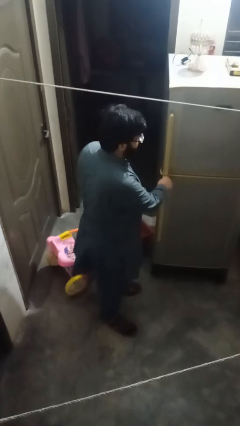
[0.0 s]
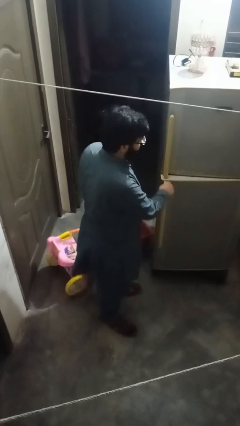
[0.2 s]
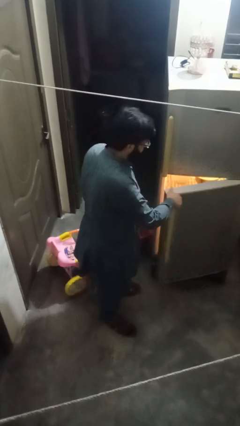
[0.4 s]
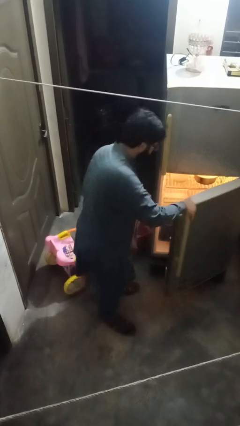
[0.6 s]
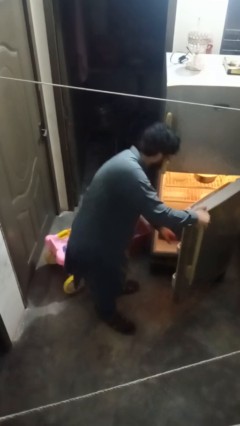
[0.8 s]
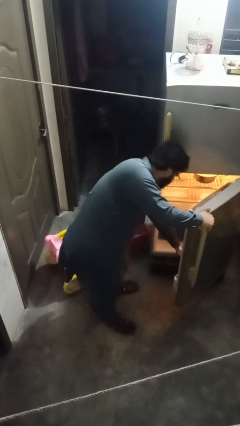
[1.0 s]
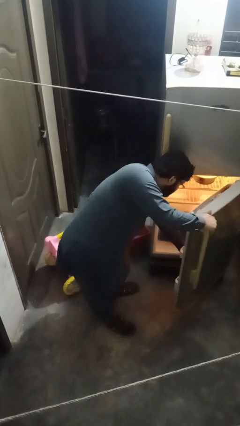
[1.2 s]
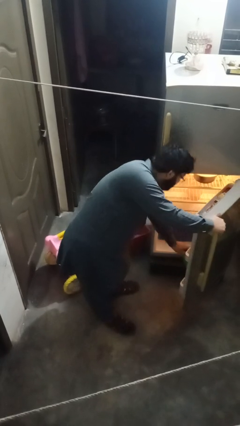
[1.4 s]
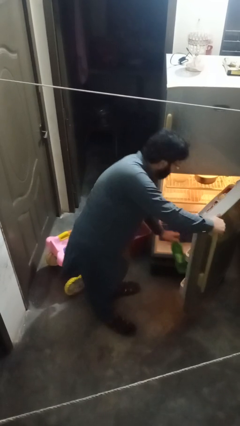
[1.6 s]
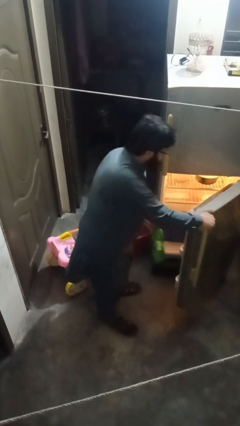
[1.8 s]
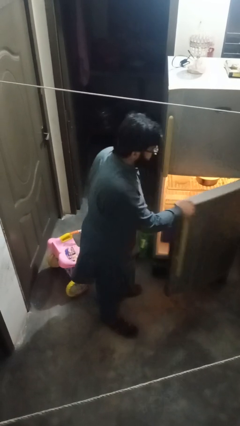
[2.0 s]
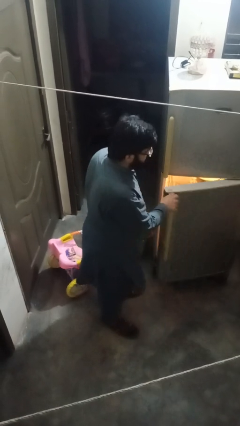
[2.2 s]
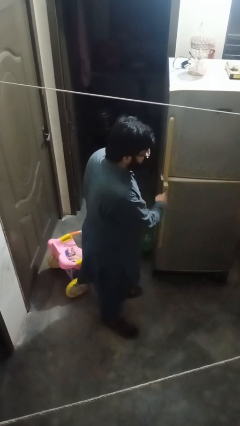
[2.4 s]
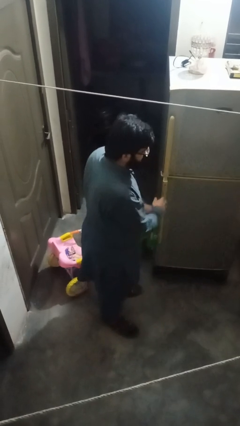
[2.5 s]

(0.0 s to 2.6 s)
person takes object from refrigerator

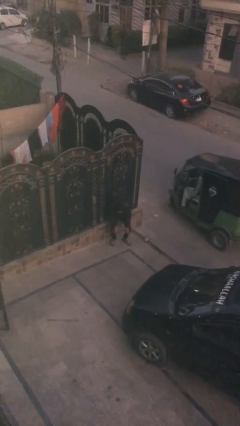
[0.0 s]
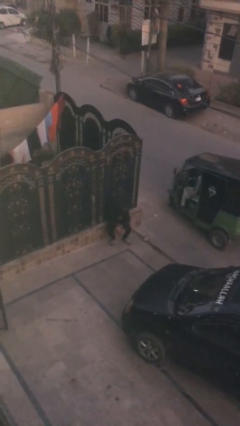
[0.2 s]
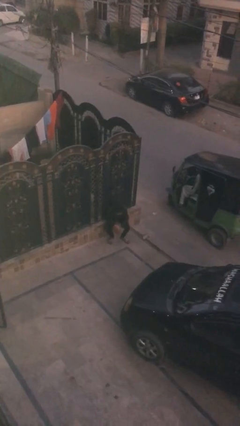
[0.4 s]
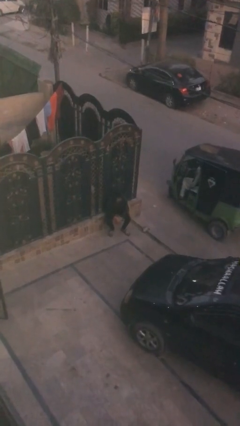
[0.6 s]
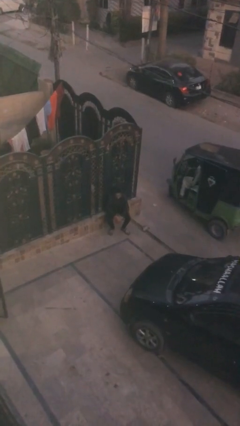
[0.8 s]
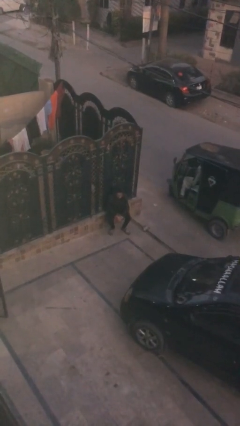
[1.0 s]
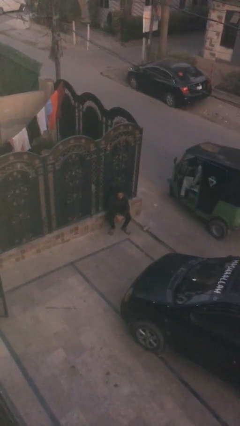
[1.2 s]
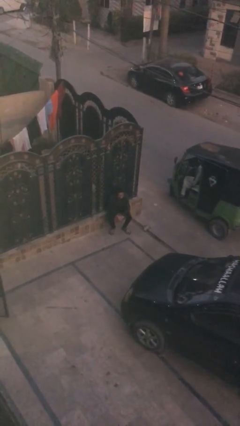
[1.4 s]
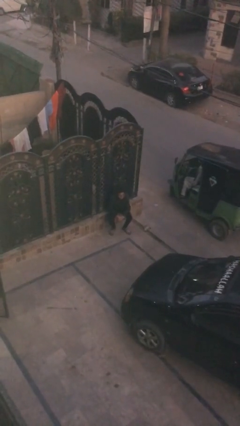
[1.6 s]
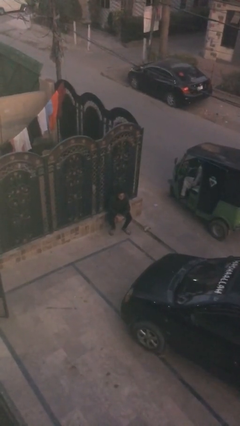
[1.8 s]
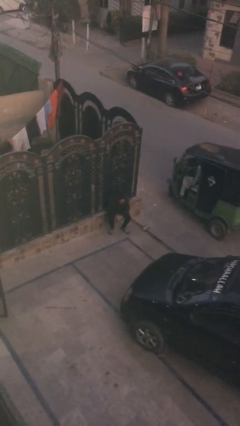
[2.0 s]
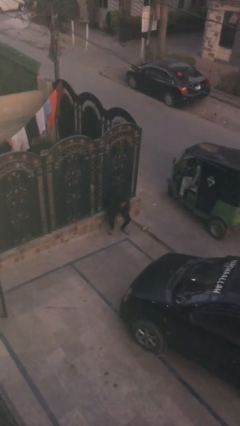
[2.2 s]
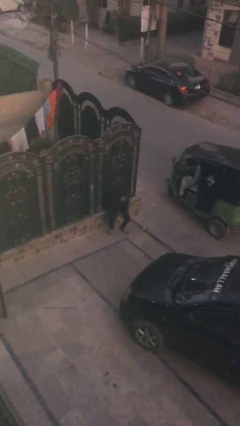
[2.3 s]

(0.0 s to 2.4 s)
person sits down

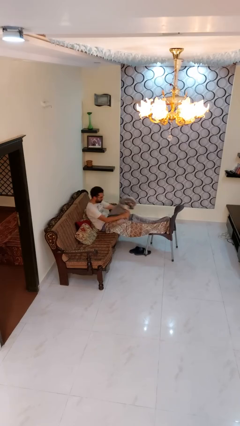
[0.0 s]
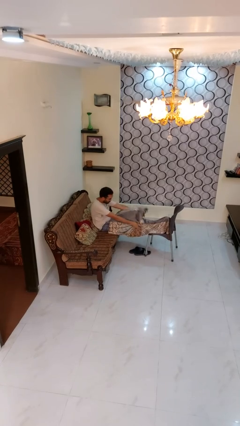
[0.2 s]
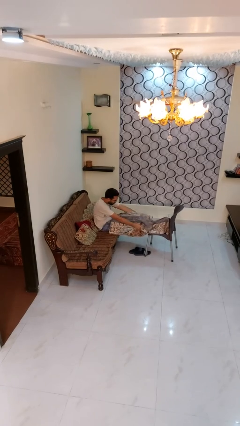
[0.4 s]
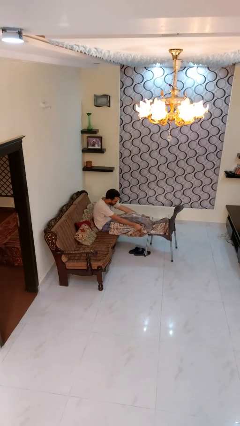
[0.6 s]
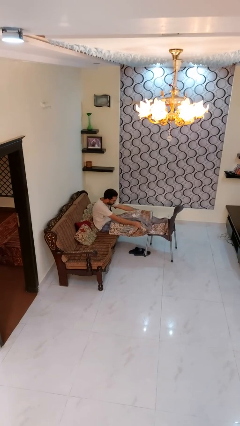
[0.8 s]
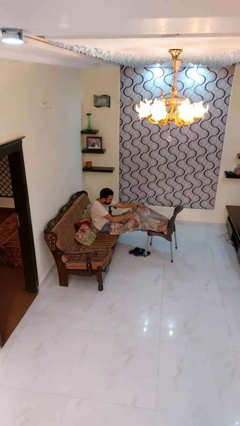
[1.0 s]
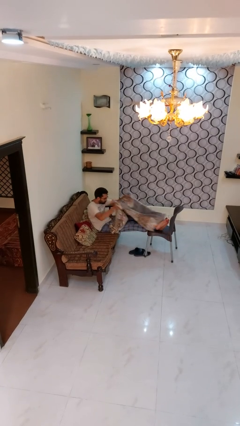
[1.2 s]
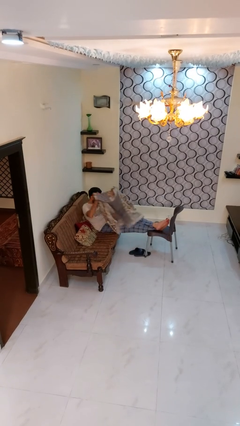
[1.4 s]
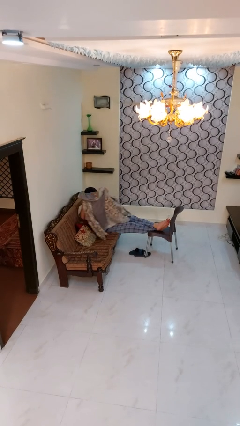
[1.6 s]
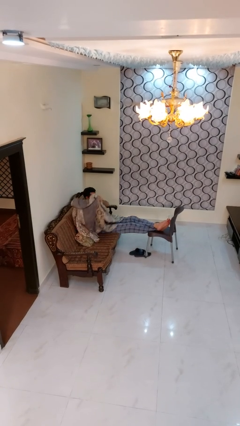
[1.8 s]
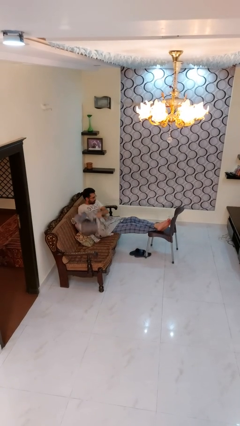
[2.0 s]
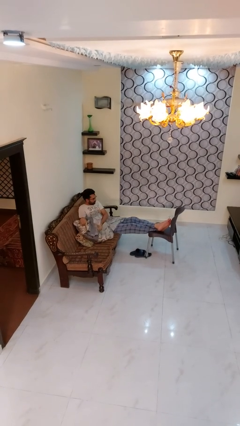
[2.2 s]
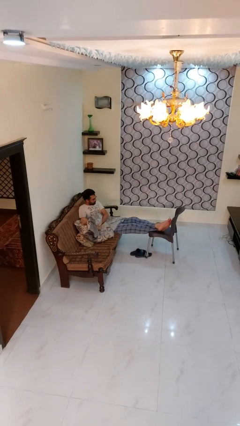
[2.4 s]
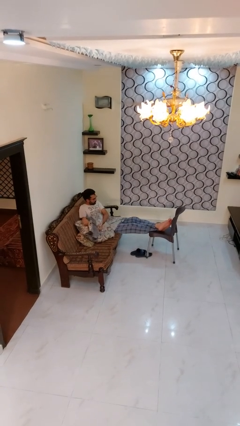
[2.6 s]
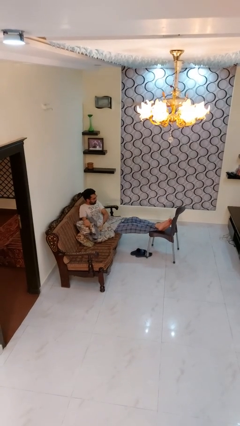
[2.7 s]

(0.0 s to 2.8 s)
person uncovers with blanket

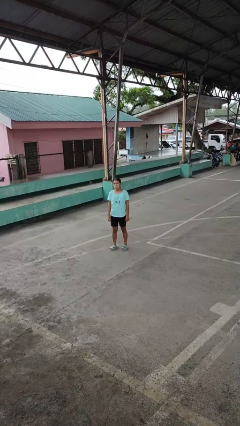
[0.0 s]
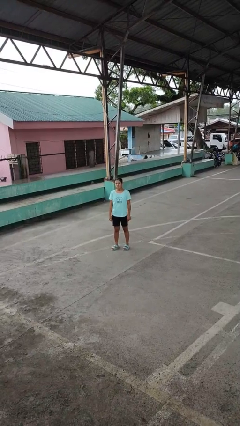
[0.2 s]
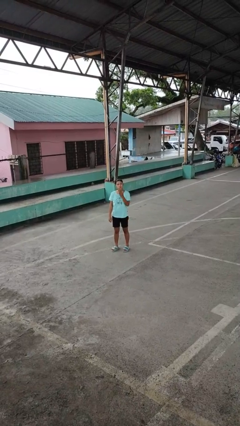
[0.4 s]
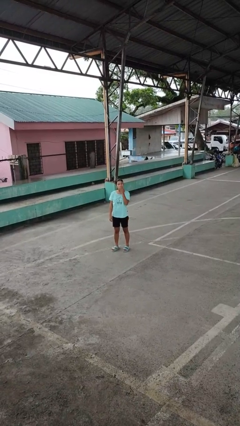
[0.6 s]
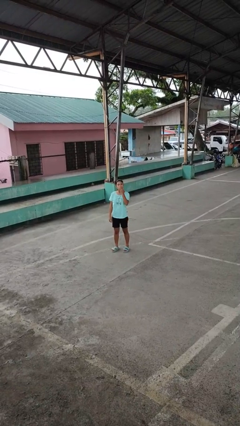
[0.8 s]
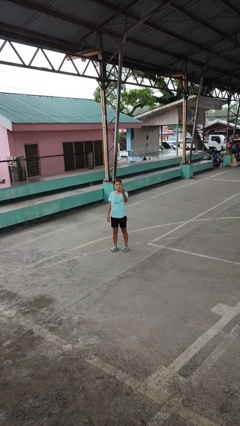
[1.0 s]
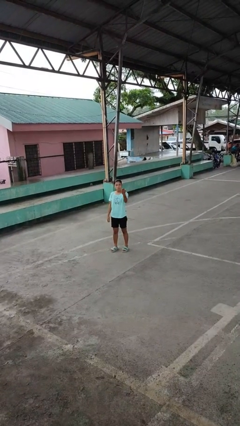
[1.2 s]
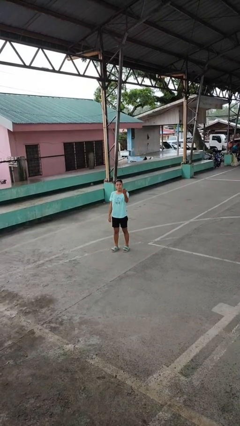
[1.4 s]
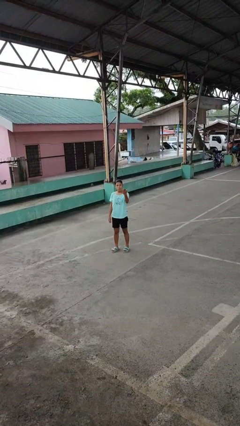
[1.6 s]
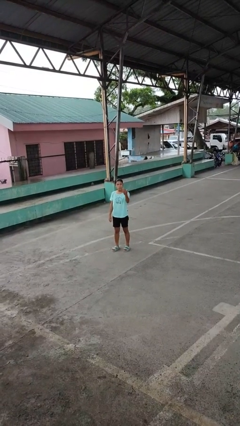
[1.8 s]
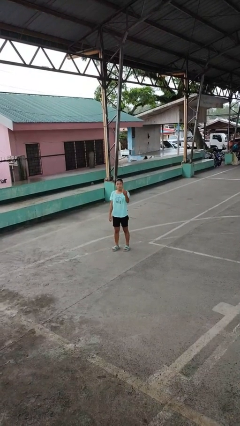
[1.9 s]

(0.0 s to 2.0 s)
person gestures blow kiss

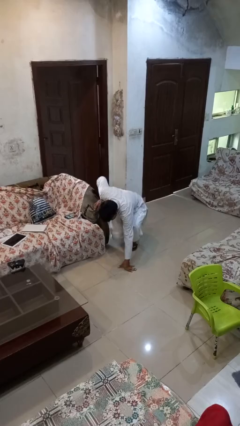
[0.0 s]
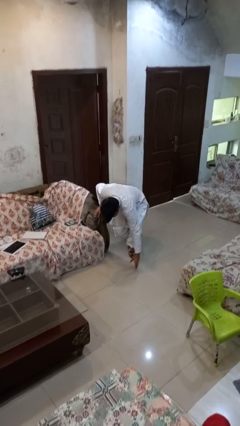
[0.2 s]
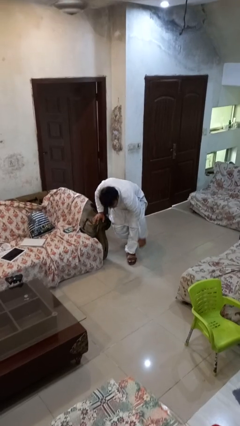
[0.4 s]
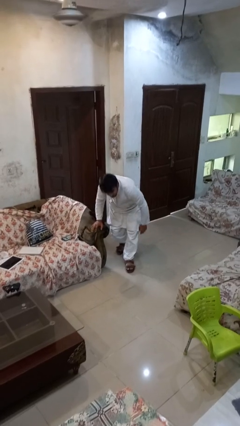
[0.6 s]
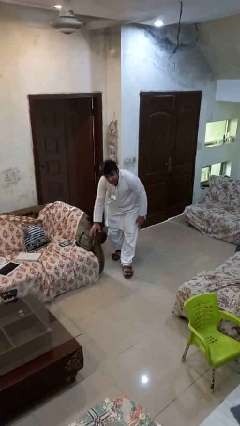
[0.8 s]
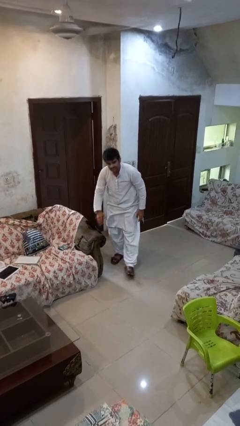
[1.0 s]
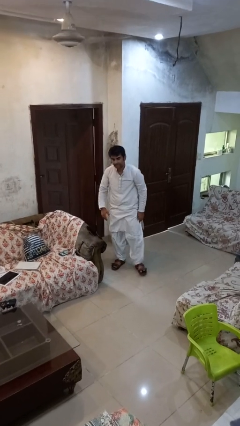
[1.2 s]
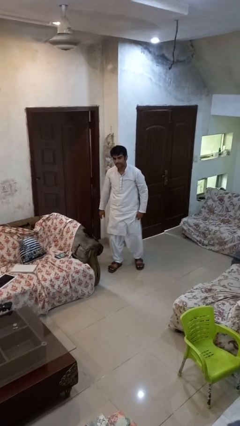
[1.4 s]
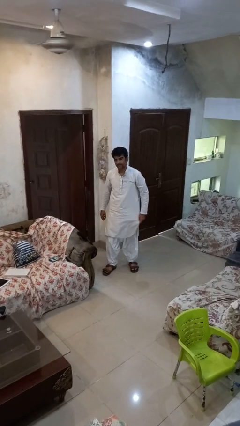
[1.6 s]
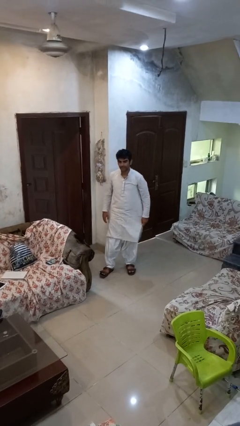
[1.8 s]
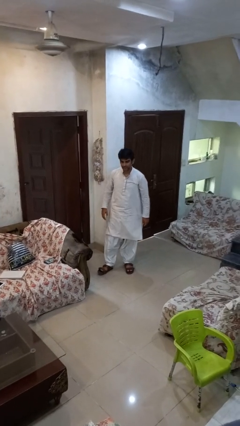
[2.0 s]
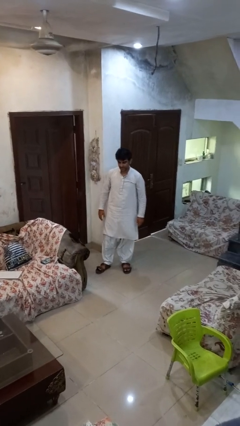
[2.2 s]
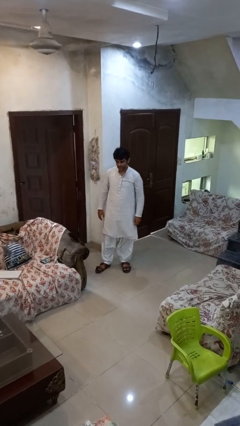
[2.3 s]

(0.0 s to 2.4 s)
person stands up from floor

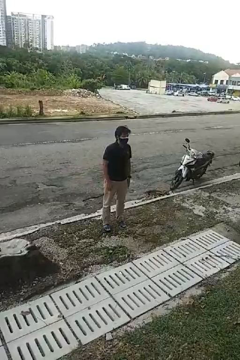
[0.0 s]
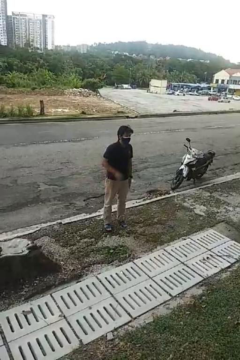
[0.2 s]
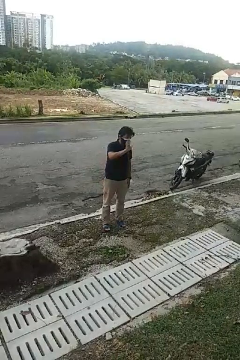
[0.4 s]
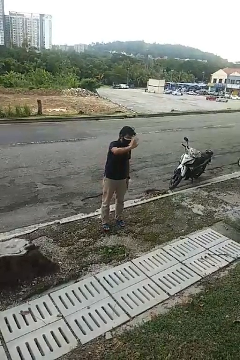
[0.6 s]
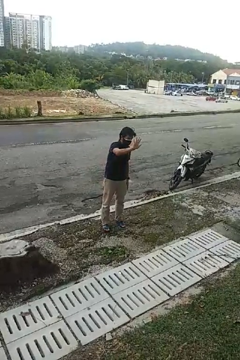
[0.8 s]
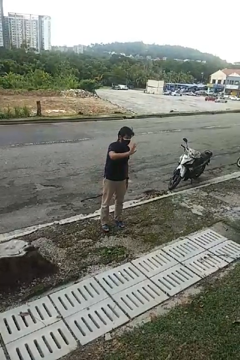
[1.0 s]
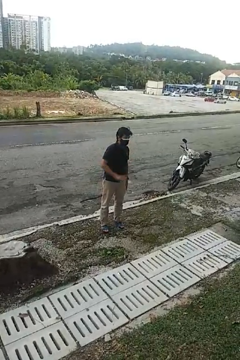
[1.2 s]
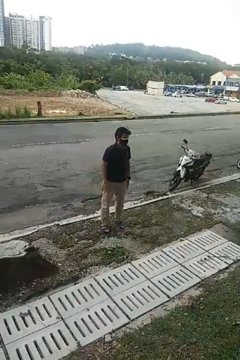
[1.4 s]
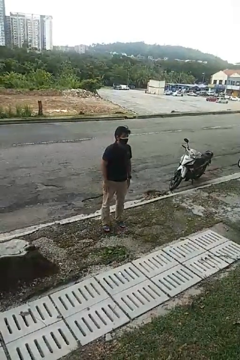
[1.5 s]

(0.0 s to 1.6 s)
person gestures number five

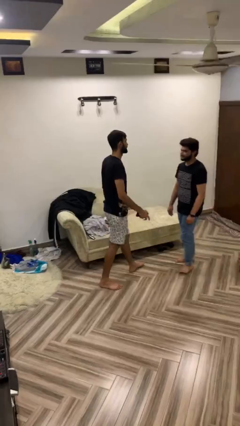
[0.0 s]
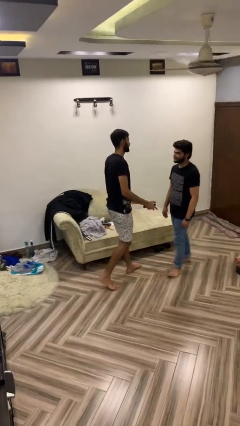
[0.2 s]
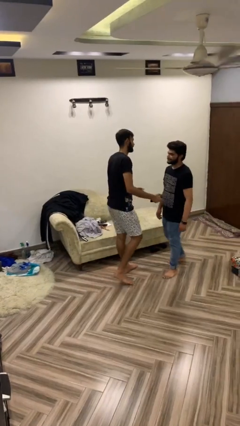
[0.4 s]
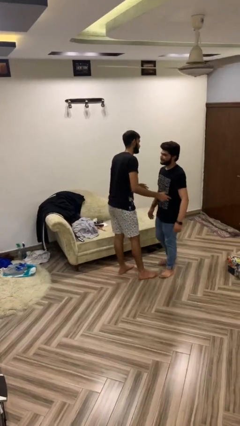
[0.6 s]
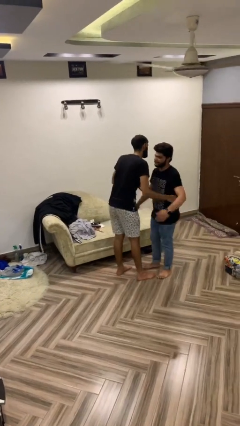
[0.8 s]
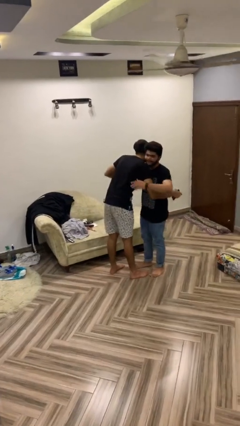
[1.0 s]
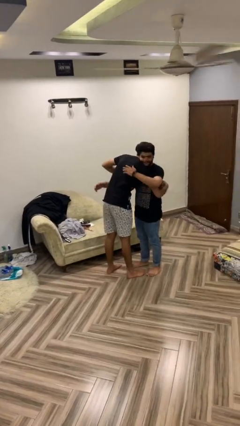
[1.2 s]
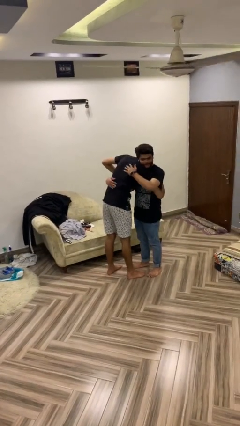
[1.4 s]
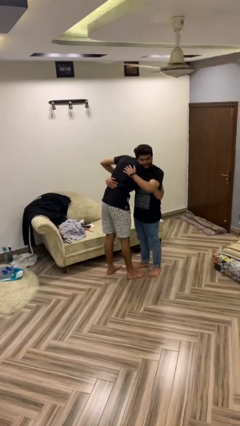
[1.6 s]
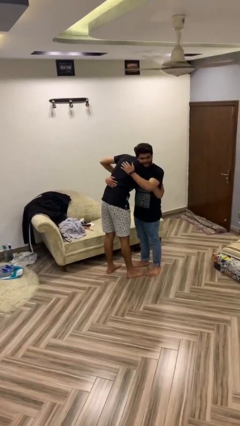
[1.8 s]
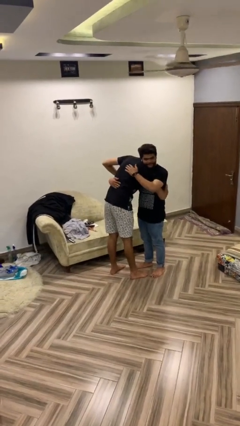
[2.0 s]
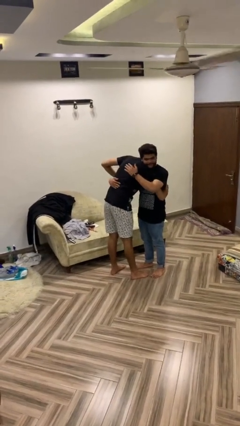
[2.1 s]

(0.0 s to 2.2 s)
person embraces person

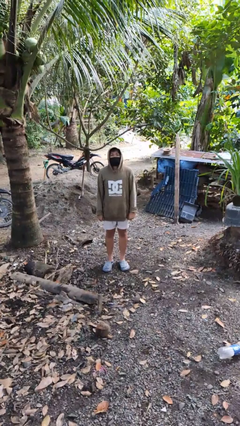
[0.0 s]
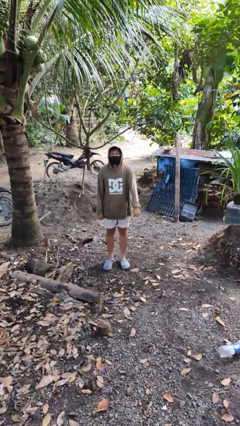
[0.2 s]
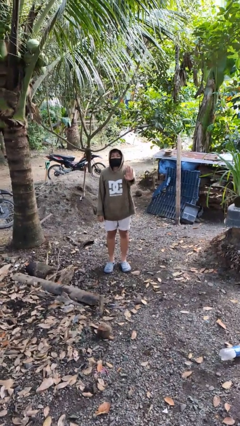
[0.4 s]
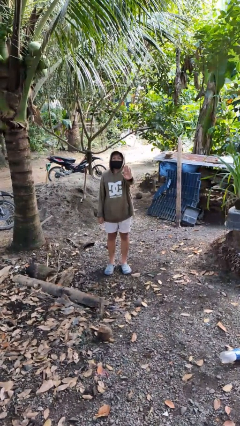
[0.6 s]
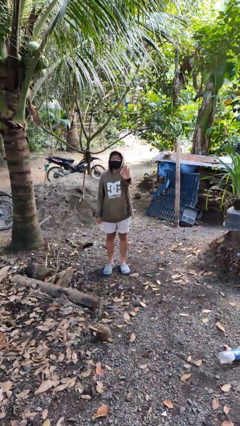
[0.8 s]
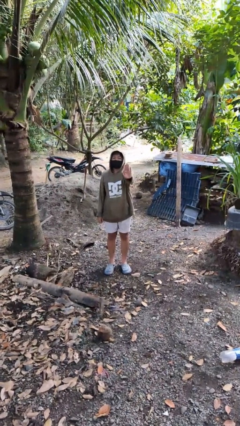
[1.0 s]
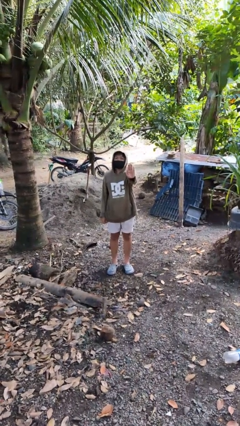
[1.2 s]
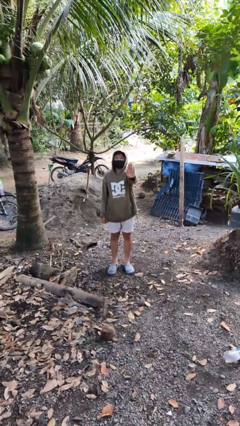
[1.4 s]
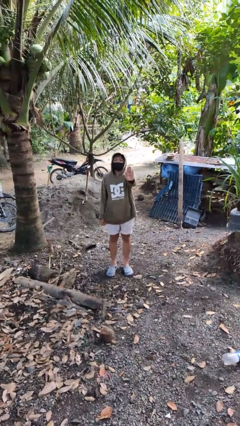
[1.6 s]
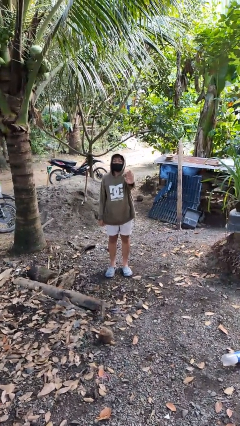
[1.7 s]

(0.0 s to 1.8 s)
person gestures stop
